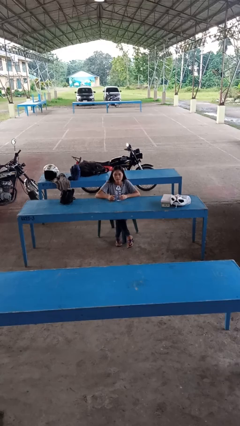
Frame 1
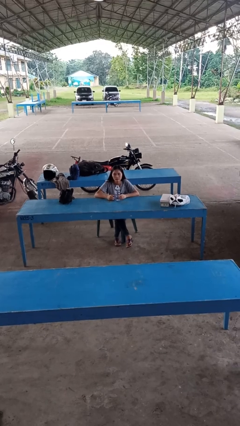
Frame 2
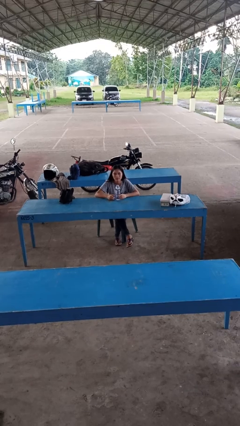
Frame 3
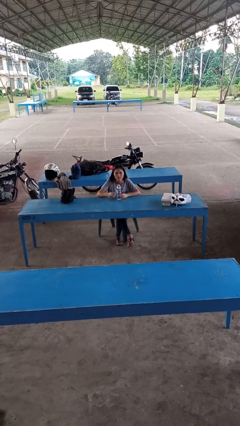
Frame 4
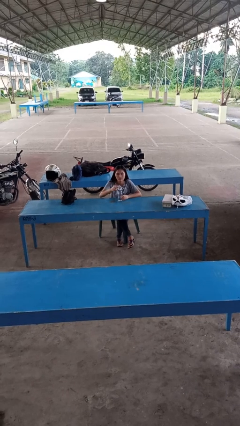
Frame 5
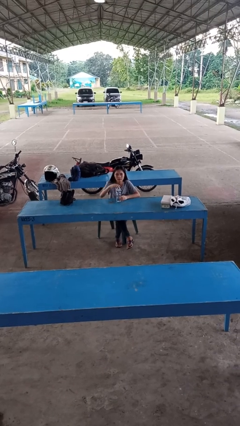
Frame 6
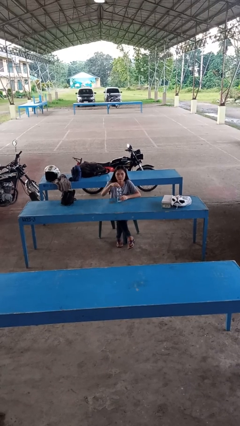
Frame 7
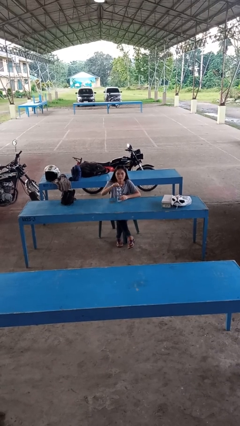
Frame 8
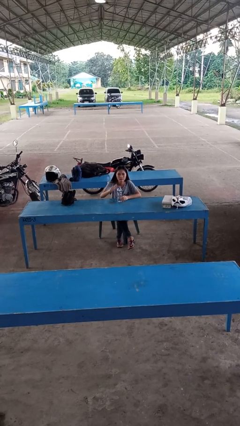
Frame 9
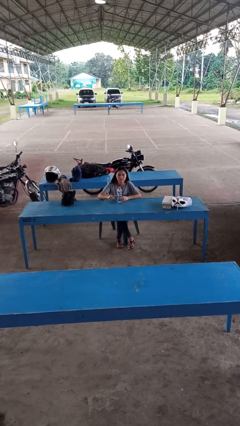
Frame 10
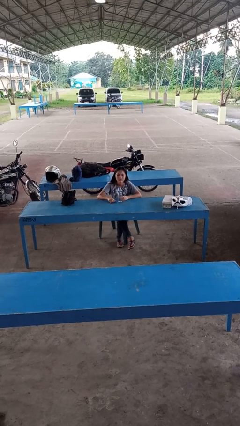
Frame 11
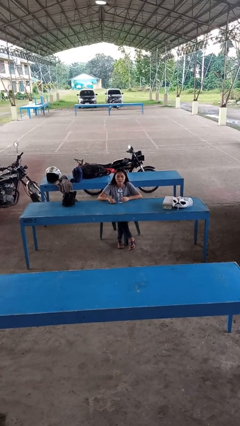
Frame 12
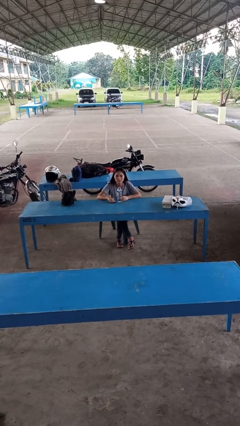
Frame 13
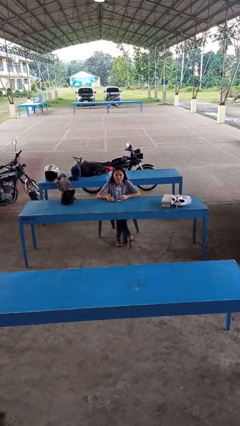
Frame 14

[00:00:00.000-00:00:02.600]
person screws lid to bottle

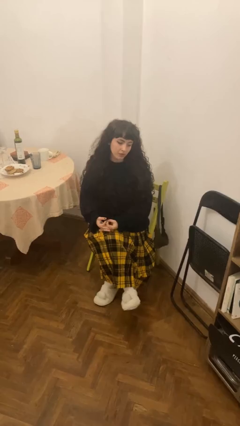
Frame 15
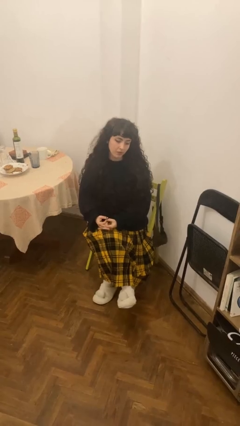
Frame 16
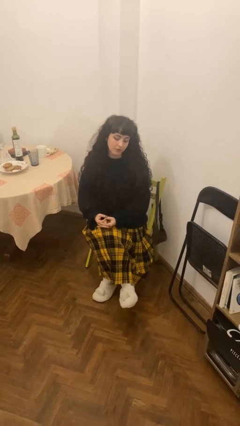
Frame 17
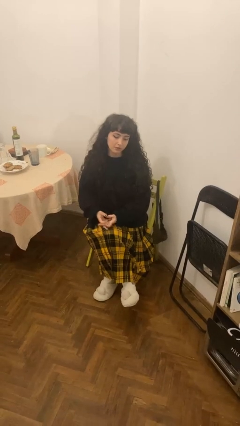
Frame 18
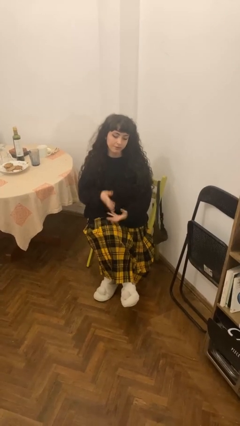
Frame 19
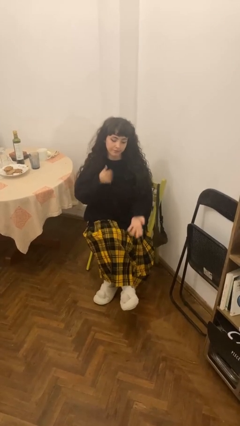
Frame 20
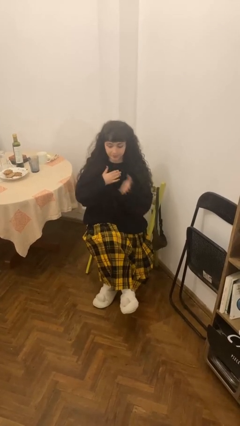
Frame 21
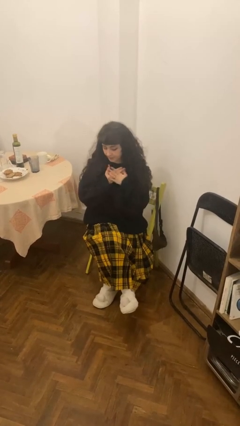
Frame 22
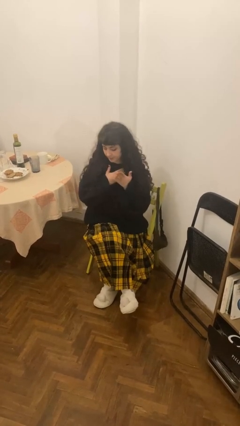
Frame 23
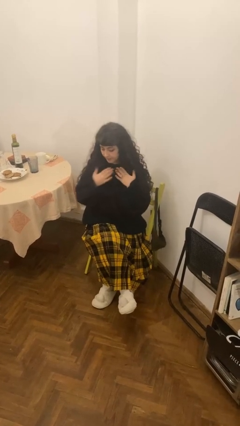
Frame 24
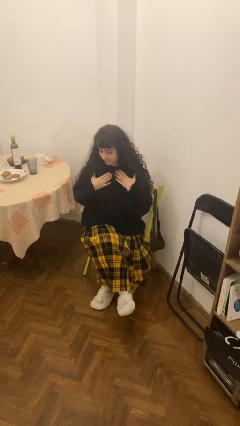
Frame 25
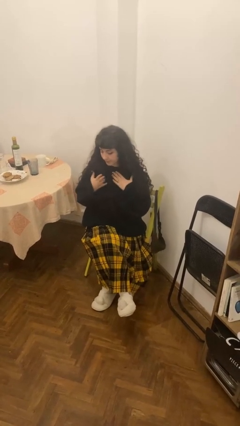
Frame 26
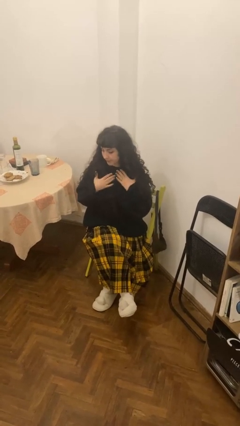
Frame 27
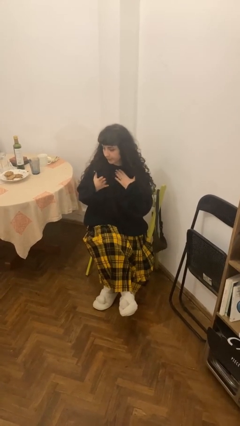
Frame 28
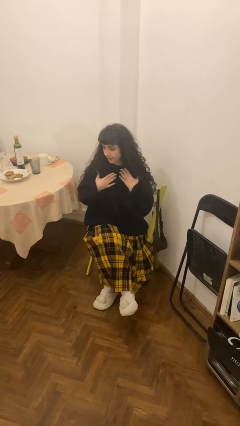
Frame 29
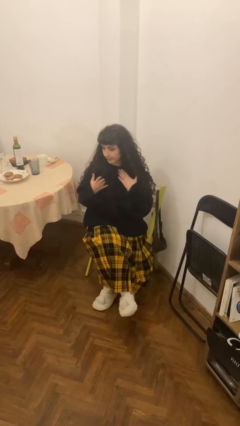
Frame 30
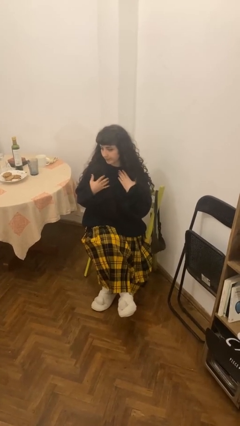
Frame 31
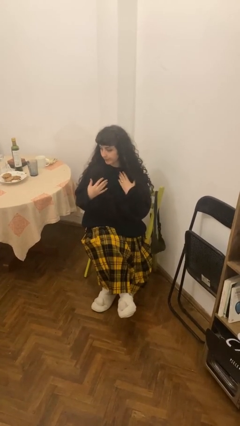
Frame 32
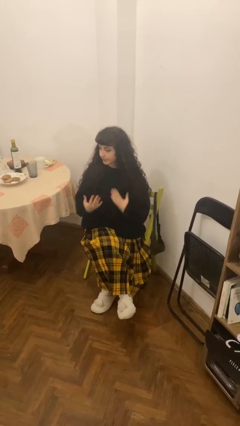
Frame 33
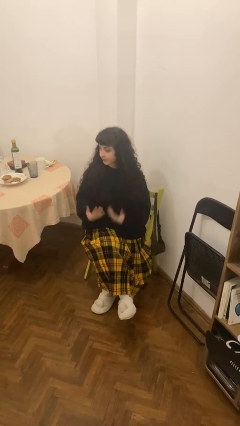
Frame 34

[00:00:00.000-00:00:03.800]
person drums on chest

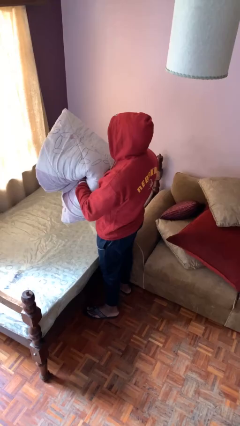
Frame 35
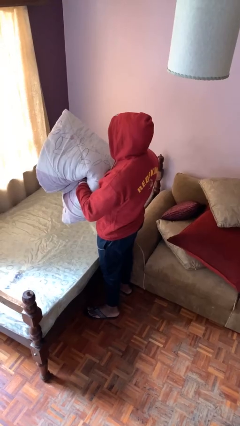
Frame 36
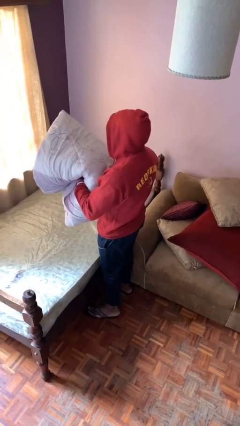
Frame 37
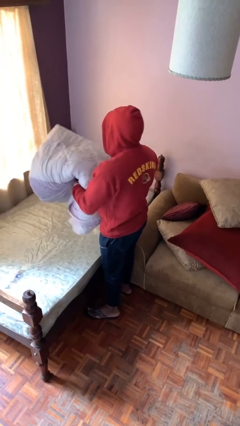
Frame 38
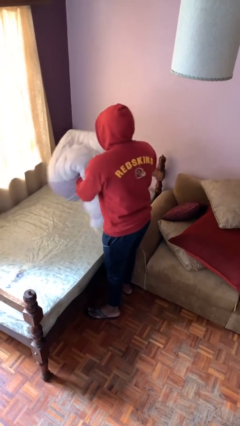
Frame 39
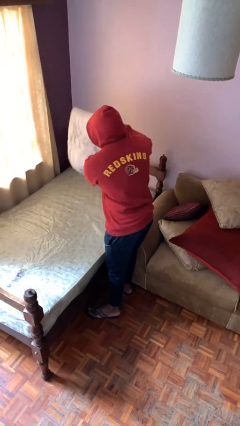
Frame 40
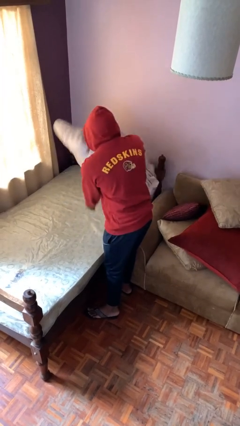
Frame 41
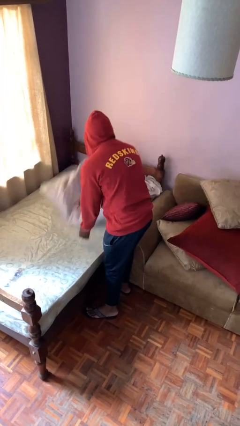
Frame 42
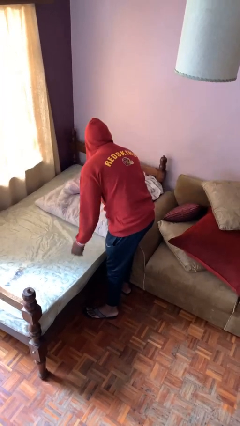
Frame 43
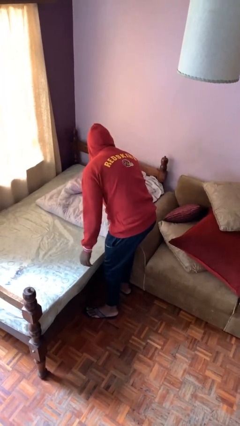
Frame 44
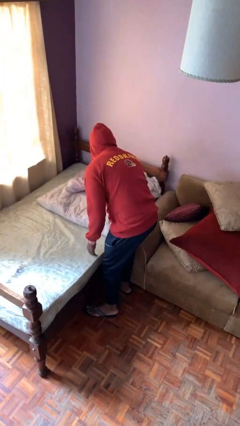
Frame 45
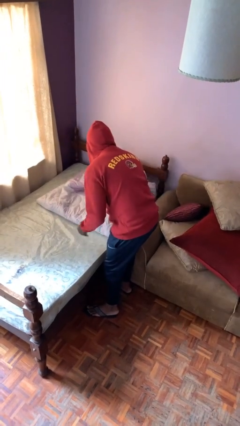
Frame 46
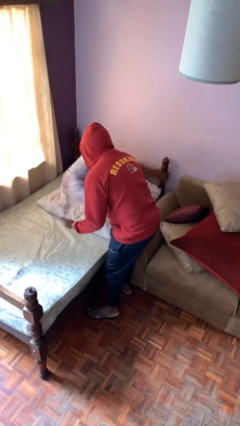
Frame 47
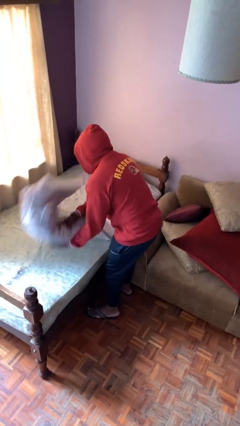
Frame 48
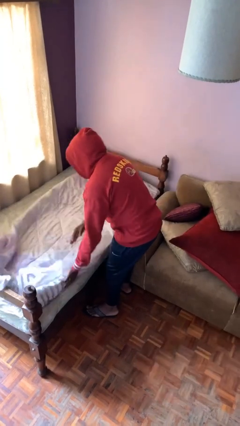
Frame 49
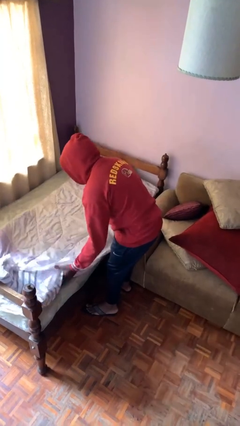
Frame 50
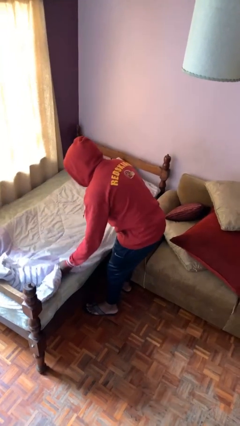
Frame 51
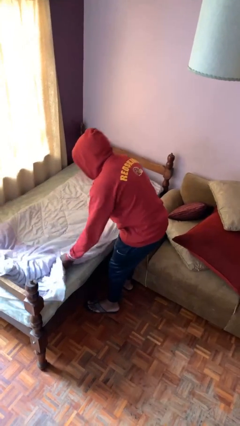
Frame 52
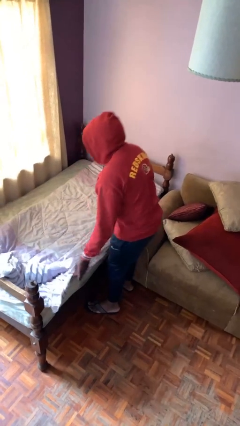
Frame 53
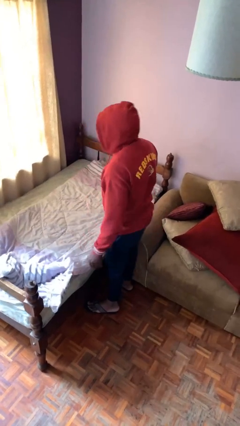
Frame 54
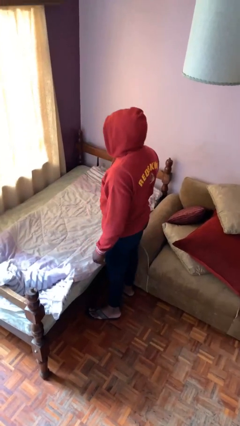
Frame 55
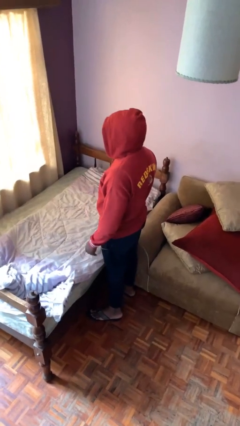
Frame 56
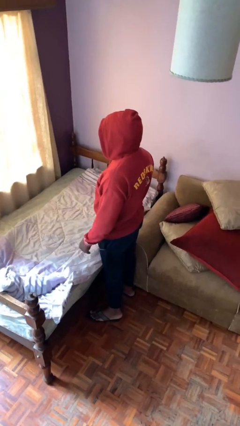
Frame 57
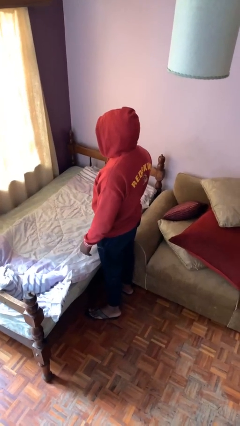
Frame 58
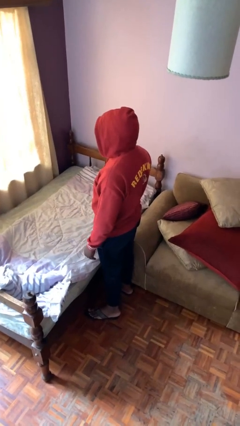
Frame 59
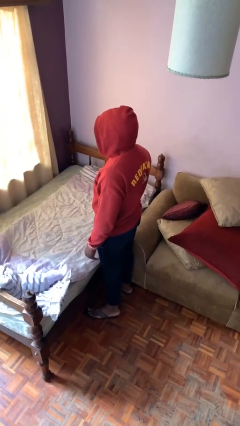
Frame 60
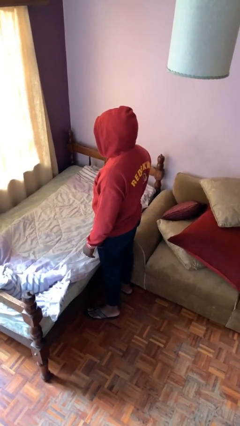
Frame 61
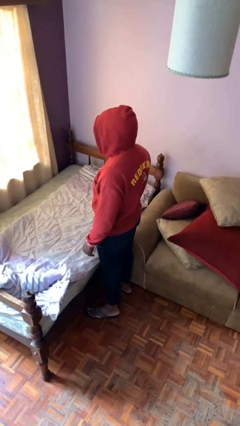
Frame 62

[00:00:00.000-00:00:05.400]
person unfolds blanket

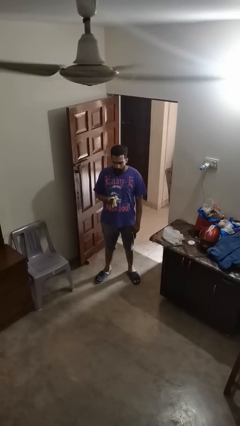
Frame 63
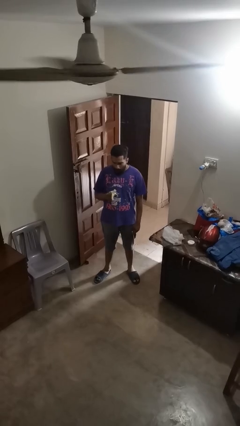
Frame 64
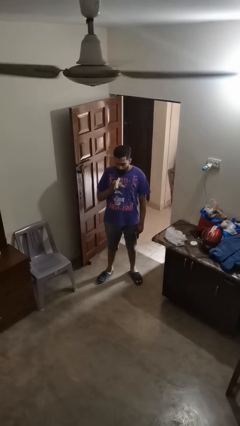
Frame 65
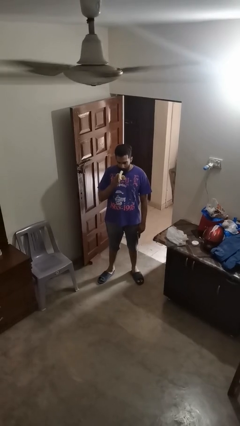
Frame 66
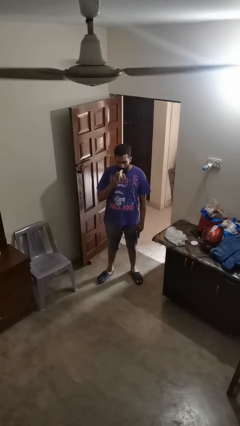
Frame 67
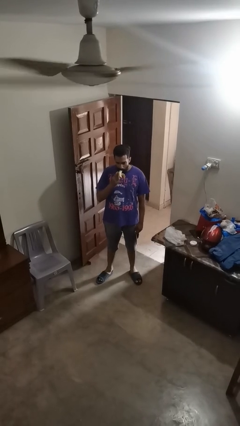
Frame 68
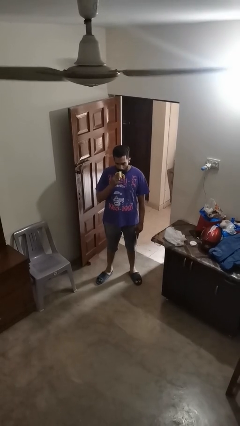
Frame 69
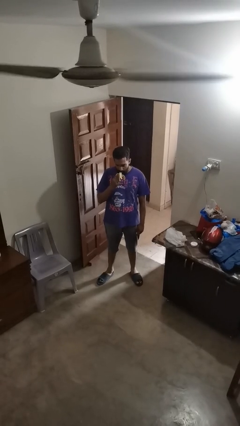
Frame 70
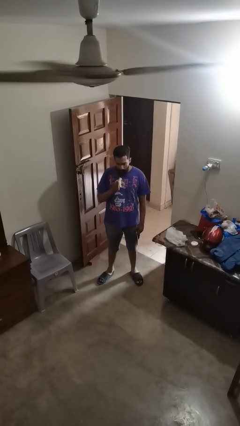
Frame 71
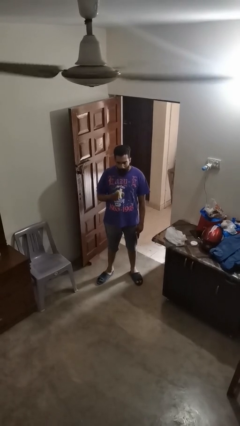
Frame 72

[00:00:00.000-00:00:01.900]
person eats banana

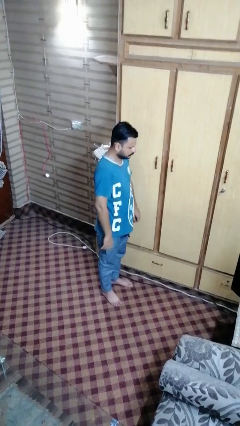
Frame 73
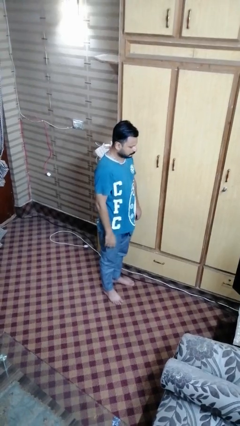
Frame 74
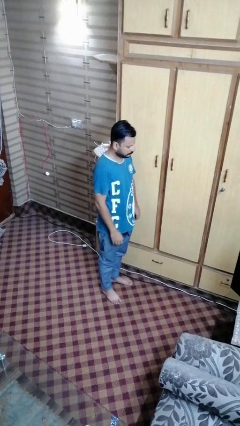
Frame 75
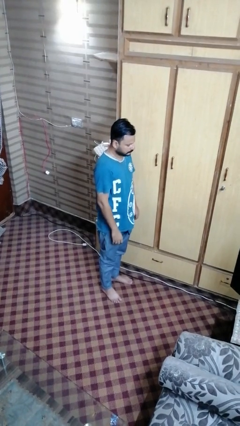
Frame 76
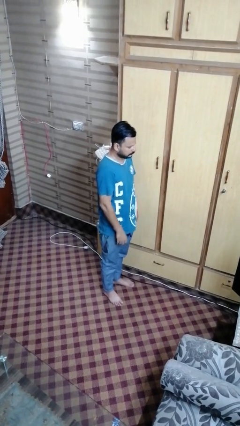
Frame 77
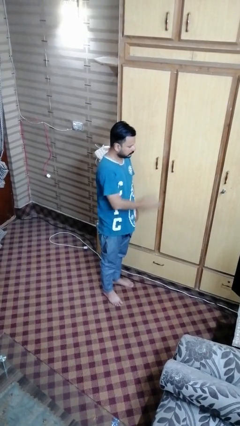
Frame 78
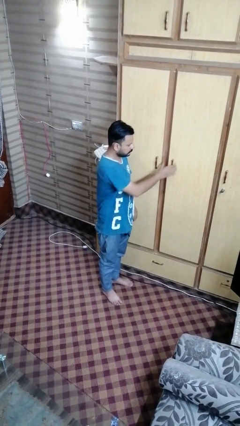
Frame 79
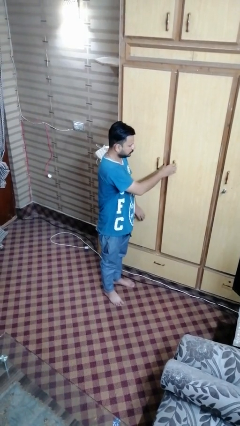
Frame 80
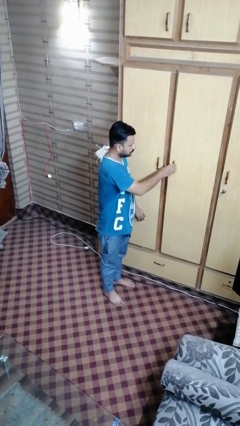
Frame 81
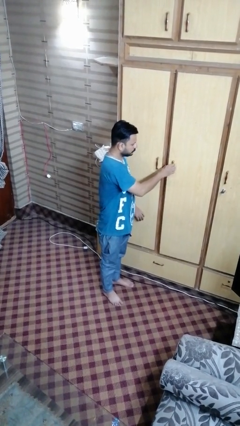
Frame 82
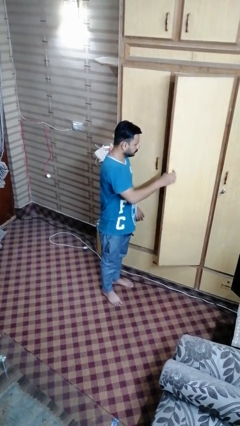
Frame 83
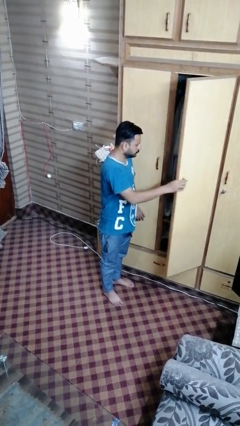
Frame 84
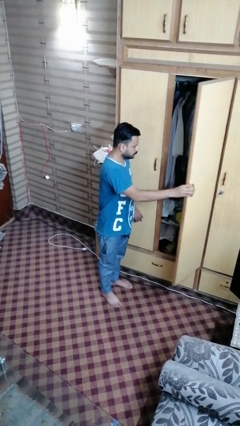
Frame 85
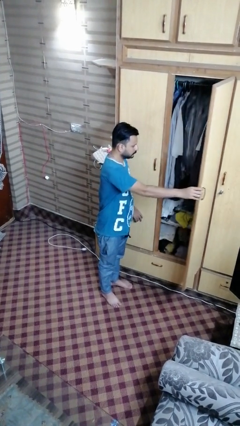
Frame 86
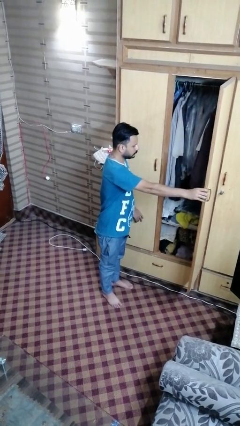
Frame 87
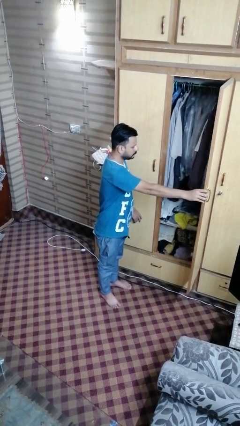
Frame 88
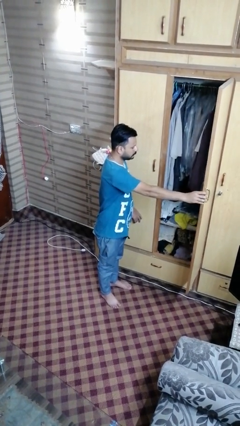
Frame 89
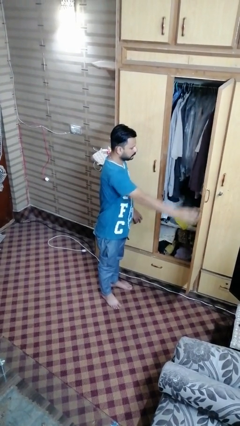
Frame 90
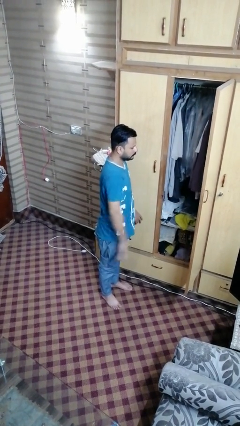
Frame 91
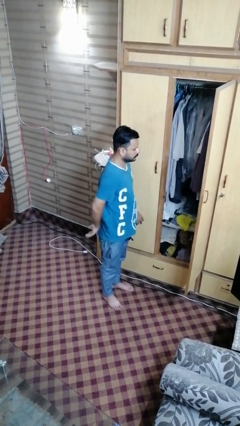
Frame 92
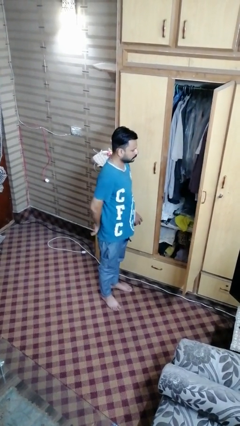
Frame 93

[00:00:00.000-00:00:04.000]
person opens closet door
